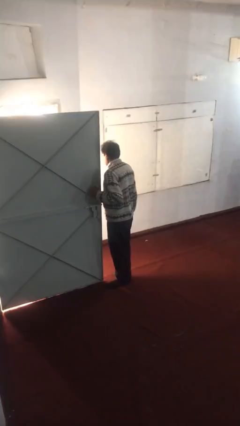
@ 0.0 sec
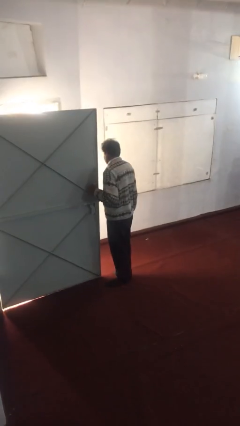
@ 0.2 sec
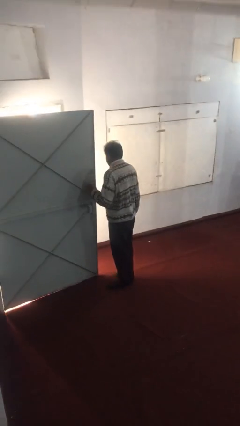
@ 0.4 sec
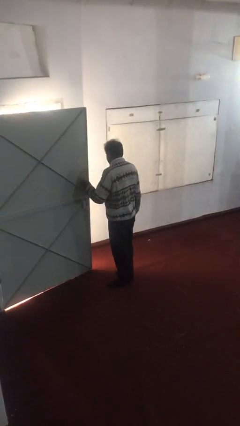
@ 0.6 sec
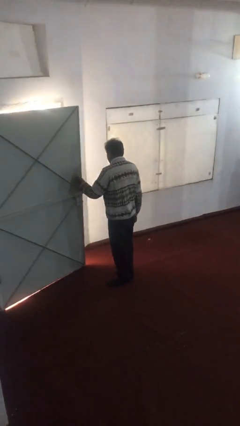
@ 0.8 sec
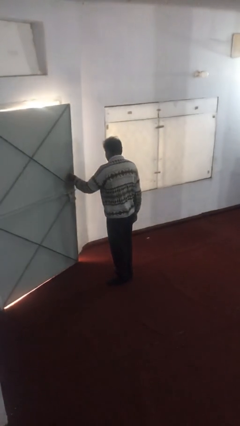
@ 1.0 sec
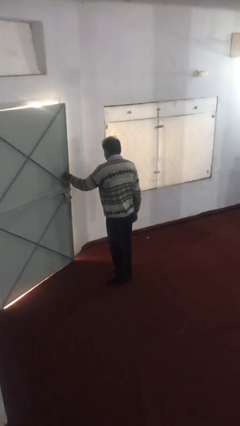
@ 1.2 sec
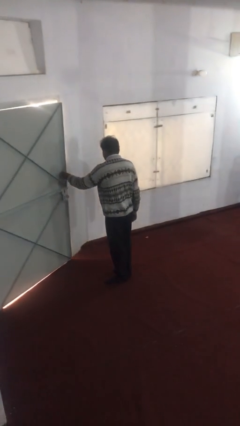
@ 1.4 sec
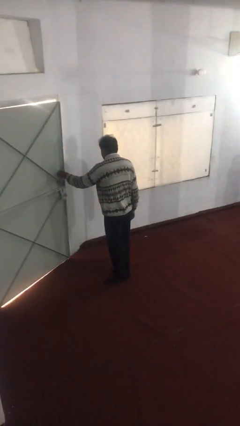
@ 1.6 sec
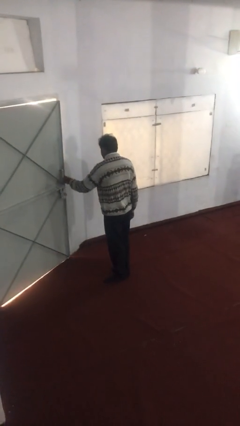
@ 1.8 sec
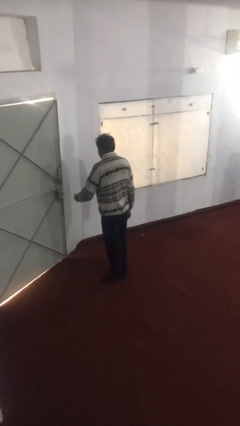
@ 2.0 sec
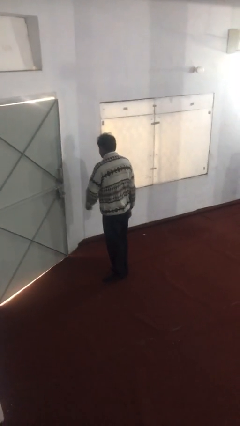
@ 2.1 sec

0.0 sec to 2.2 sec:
person closes facility door

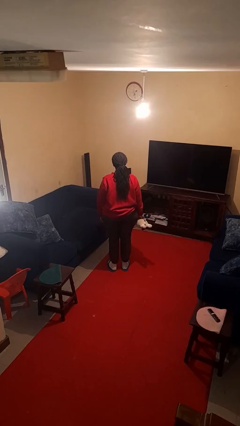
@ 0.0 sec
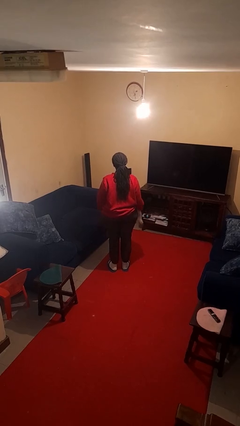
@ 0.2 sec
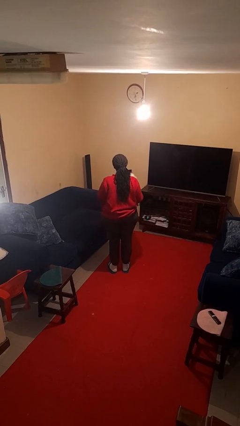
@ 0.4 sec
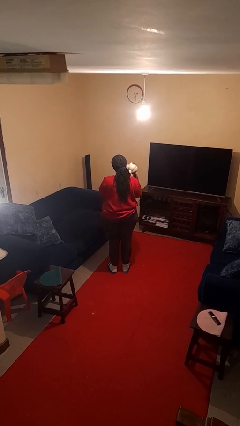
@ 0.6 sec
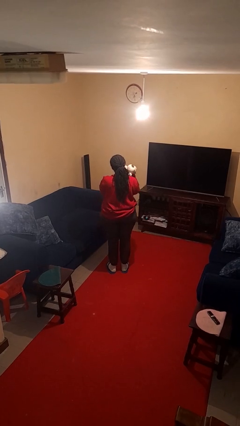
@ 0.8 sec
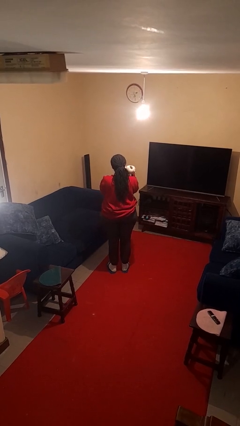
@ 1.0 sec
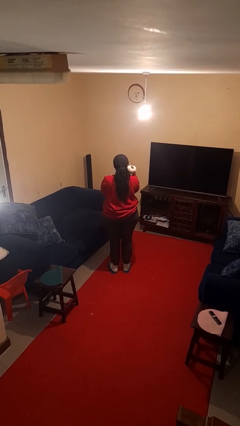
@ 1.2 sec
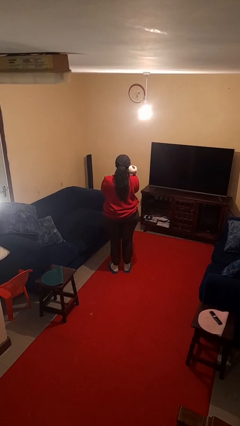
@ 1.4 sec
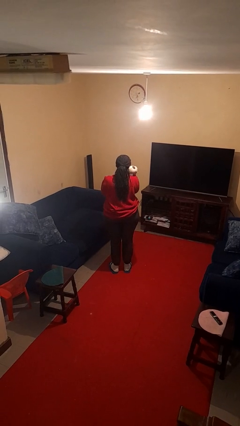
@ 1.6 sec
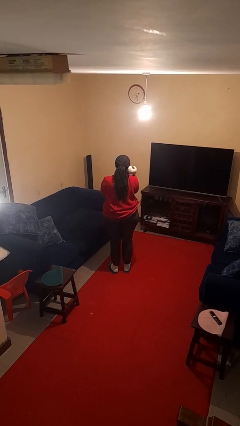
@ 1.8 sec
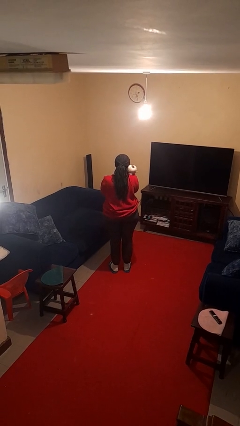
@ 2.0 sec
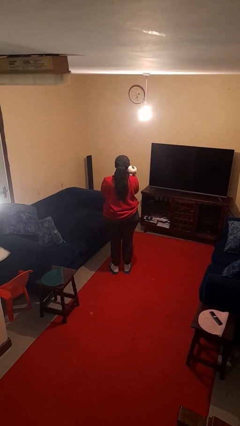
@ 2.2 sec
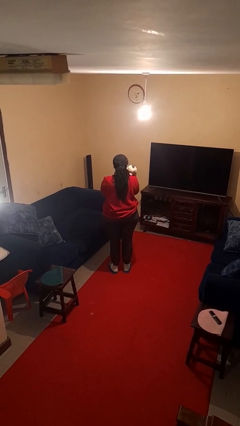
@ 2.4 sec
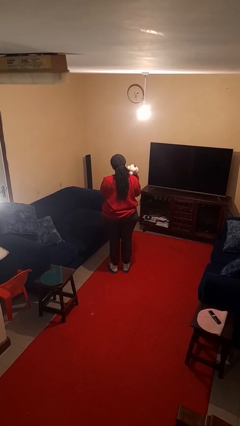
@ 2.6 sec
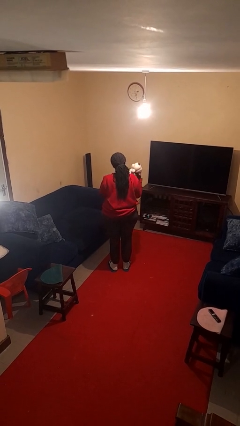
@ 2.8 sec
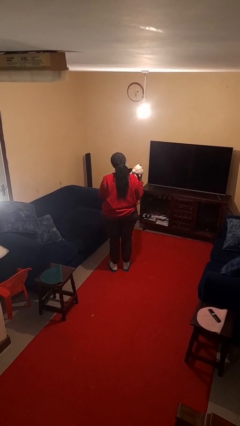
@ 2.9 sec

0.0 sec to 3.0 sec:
person hugs stuffed animal

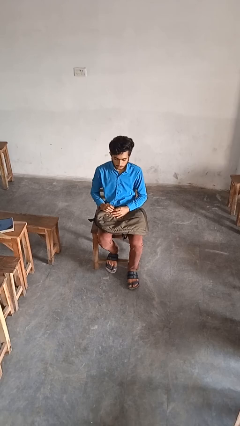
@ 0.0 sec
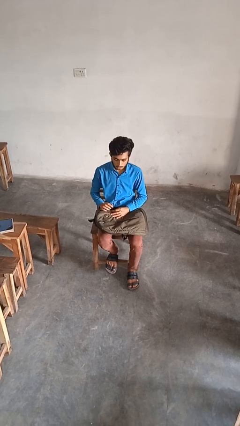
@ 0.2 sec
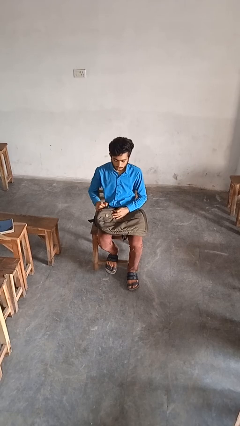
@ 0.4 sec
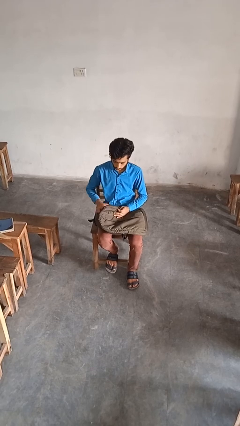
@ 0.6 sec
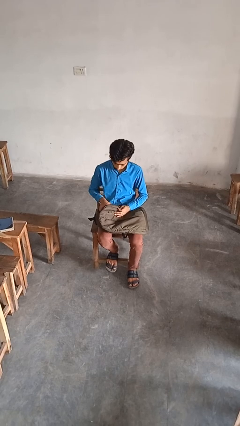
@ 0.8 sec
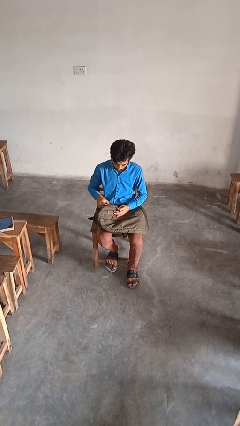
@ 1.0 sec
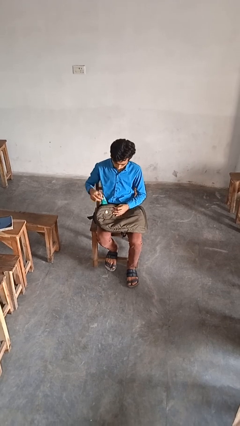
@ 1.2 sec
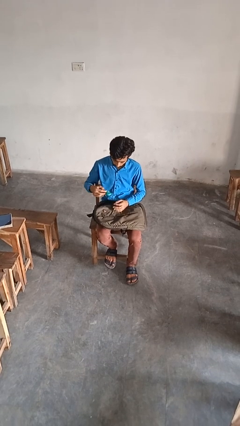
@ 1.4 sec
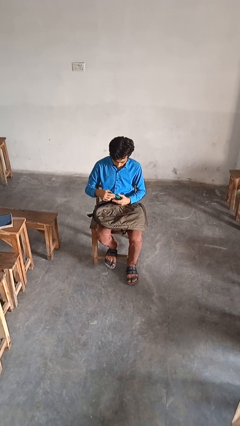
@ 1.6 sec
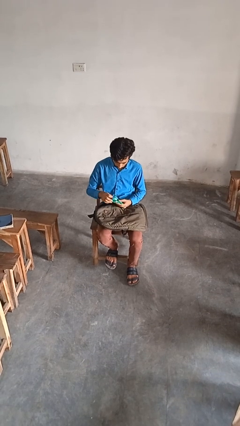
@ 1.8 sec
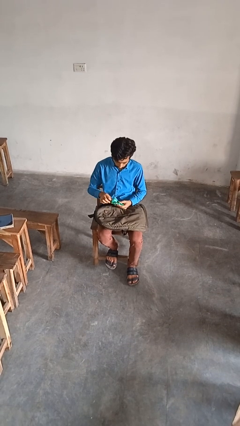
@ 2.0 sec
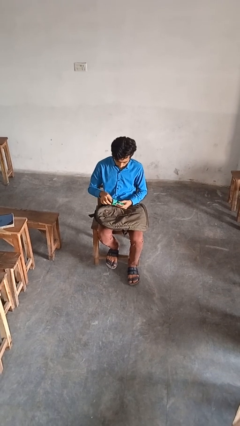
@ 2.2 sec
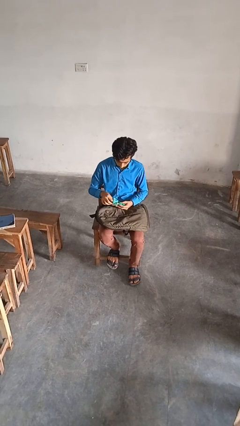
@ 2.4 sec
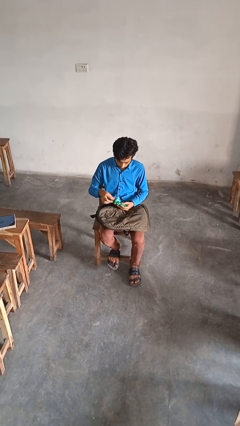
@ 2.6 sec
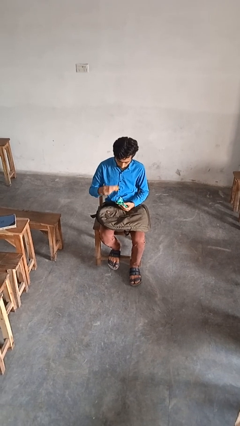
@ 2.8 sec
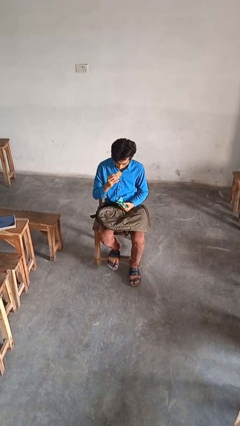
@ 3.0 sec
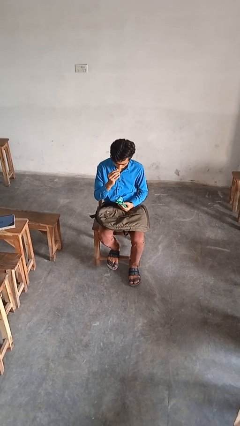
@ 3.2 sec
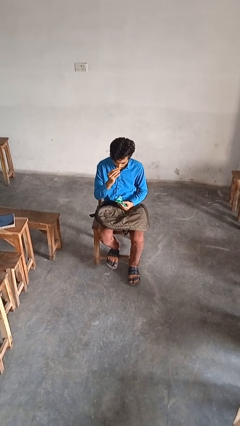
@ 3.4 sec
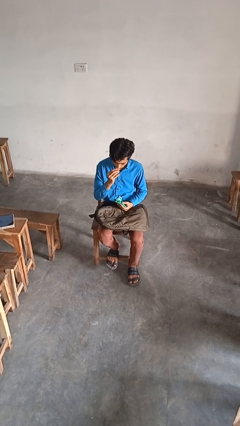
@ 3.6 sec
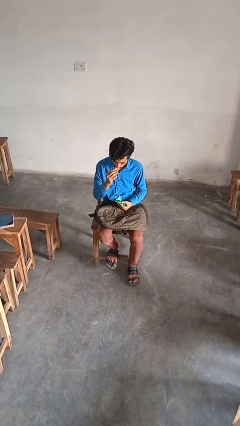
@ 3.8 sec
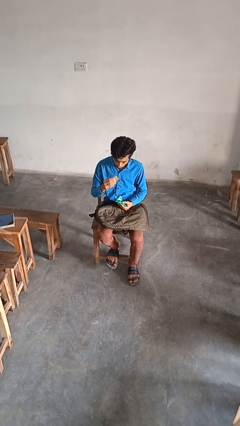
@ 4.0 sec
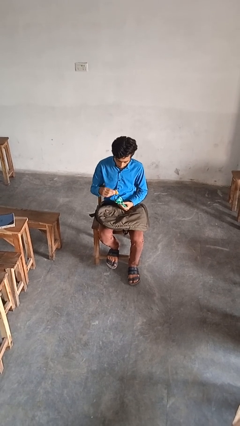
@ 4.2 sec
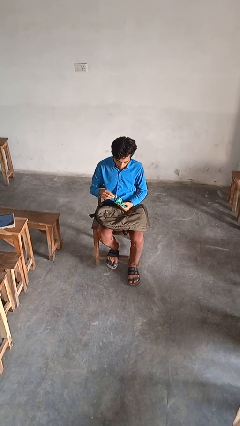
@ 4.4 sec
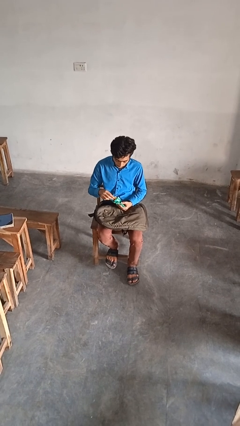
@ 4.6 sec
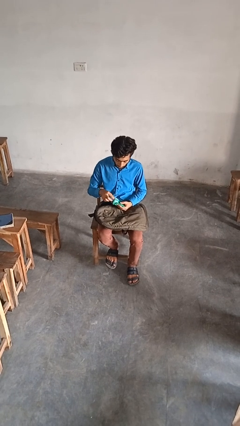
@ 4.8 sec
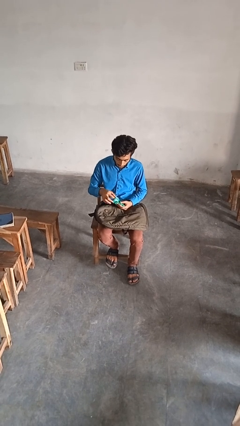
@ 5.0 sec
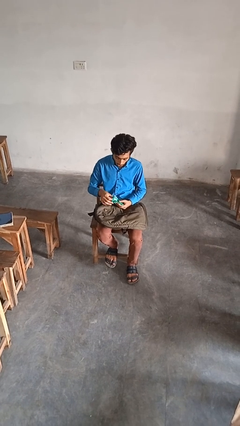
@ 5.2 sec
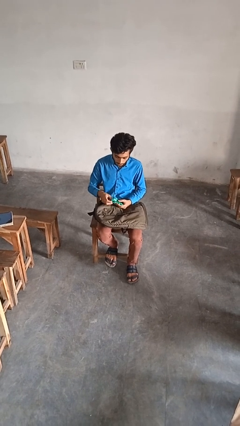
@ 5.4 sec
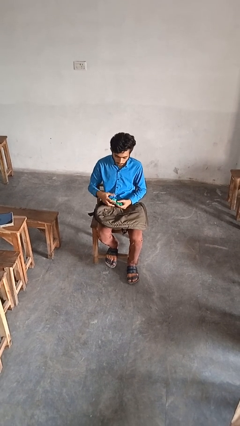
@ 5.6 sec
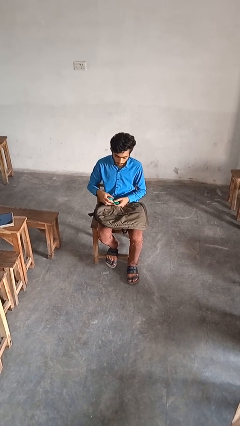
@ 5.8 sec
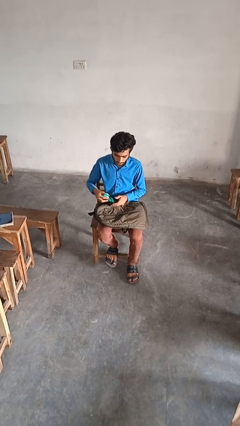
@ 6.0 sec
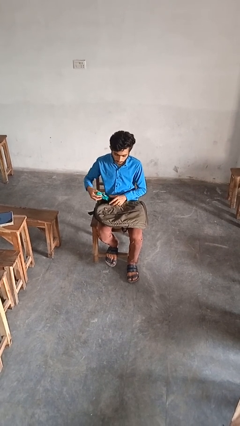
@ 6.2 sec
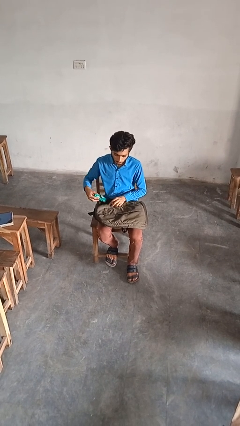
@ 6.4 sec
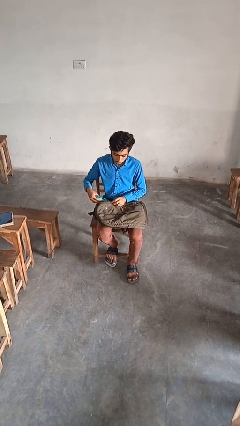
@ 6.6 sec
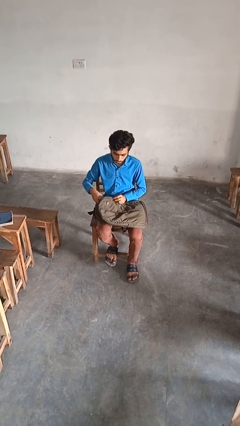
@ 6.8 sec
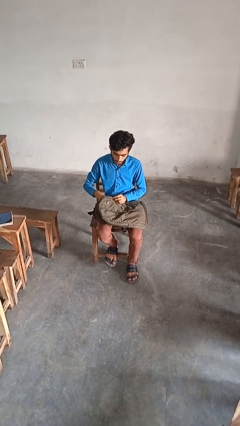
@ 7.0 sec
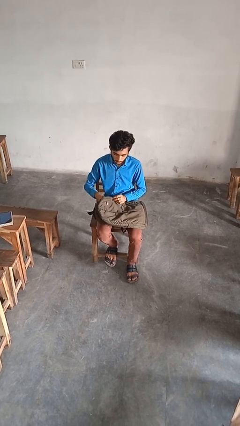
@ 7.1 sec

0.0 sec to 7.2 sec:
person eats snack from bag

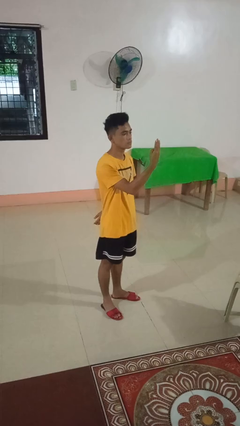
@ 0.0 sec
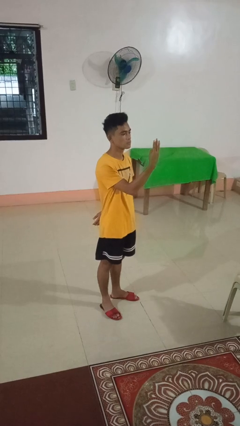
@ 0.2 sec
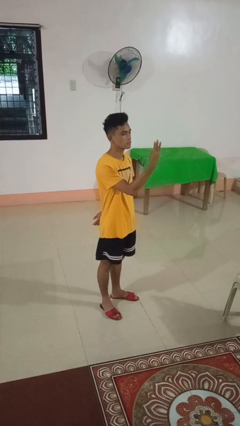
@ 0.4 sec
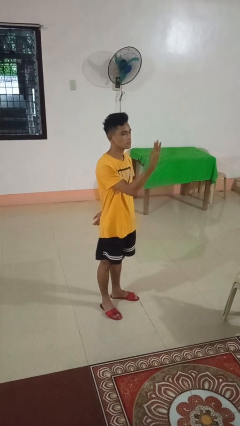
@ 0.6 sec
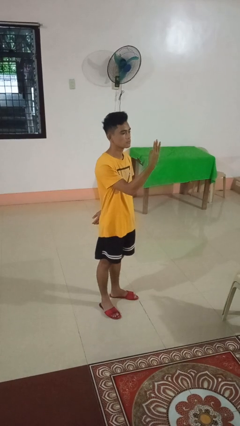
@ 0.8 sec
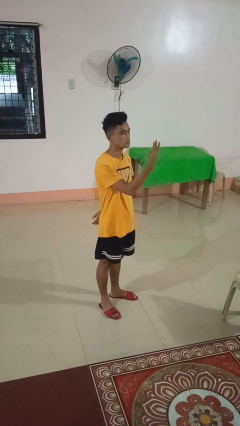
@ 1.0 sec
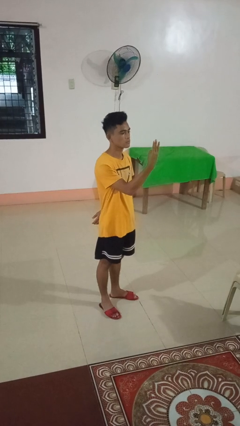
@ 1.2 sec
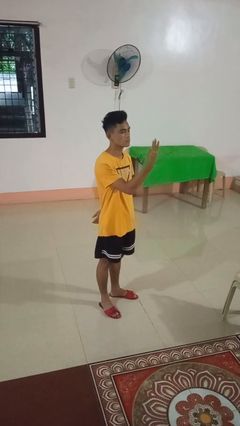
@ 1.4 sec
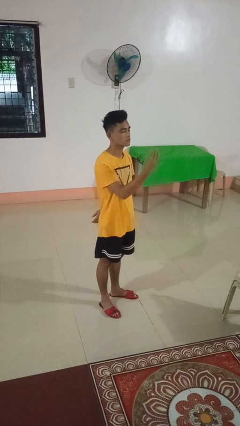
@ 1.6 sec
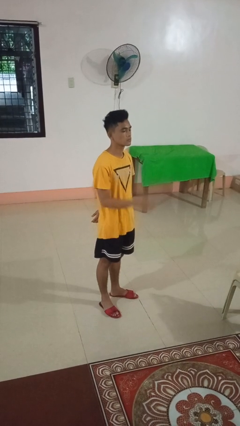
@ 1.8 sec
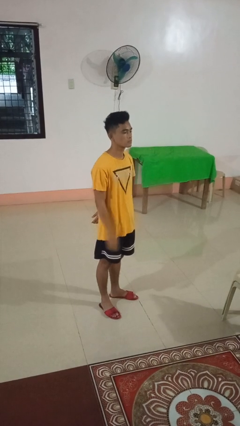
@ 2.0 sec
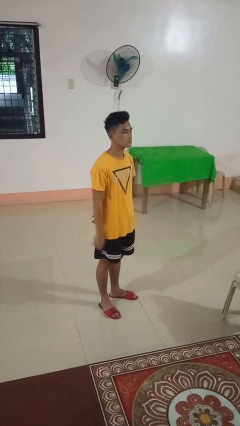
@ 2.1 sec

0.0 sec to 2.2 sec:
person gestures number three

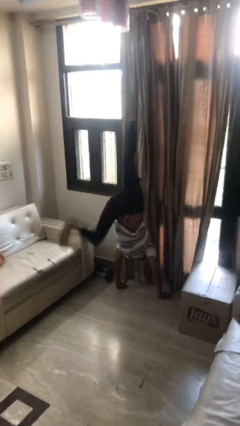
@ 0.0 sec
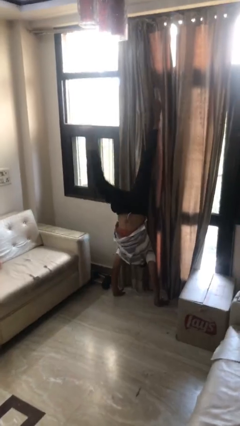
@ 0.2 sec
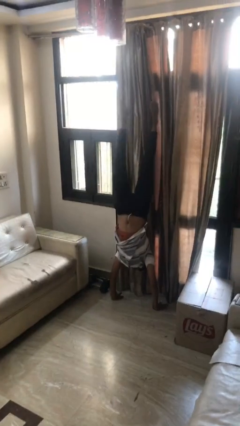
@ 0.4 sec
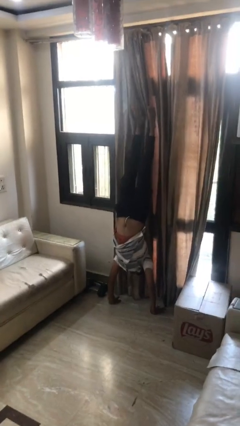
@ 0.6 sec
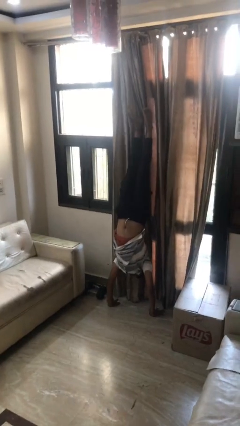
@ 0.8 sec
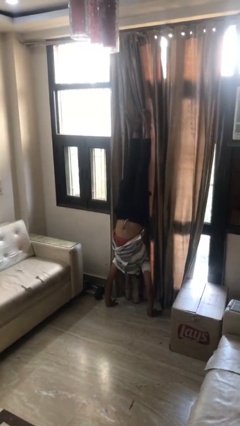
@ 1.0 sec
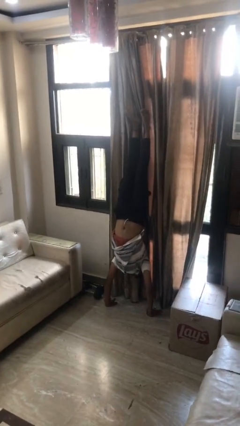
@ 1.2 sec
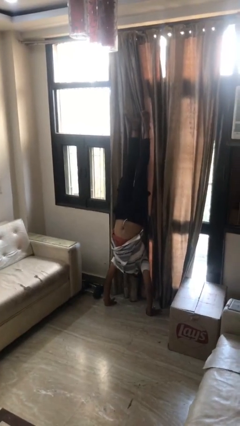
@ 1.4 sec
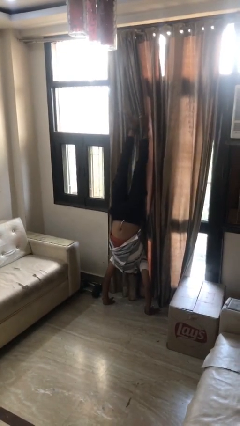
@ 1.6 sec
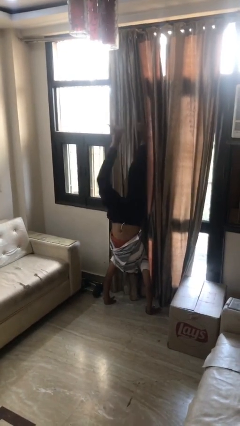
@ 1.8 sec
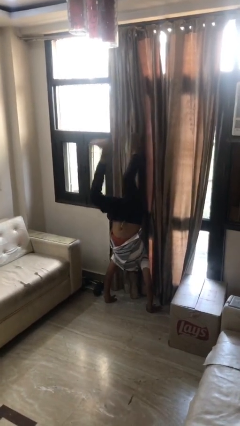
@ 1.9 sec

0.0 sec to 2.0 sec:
person handstand

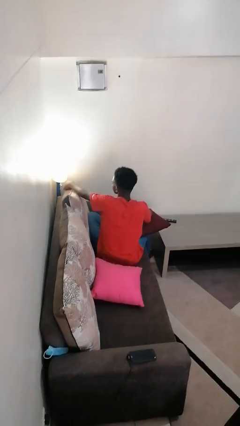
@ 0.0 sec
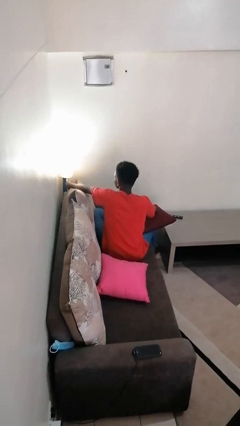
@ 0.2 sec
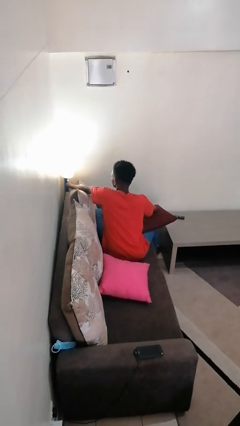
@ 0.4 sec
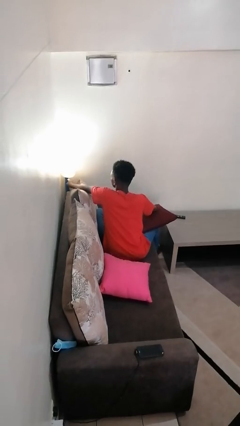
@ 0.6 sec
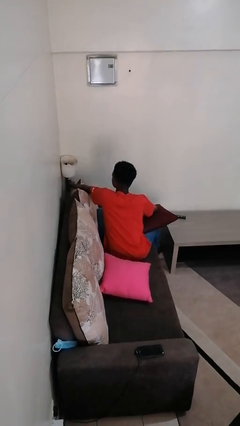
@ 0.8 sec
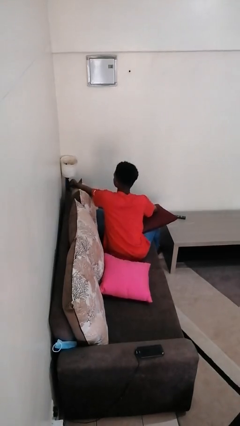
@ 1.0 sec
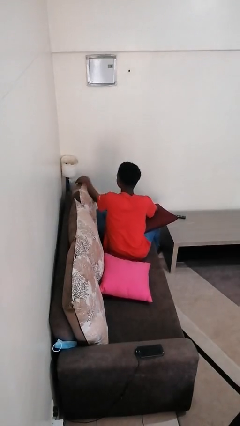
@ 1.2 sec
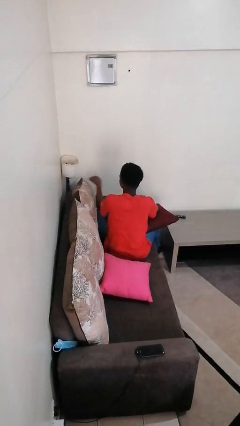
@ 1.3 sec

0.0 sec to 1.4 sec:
person turns off lamp
